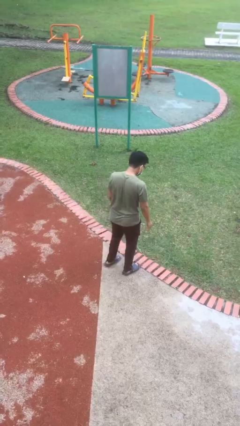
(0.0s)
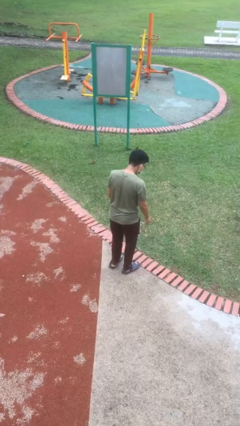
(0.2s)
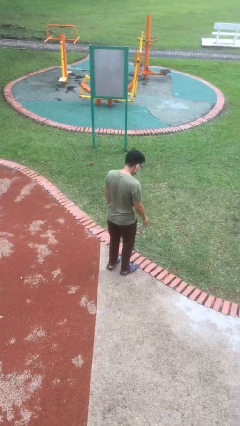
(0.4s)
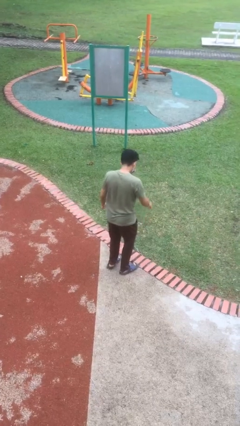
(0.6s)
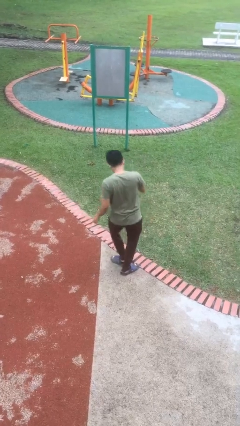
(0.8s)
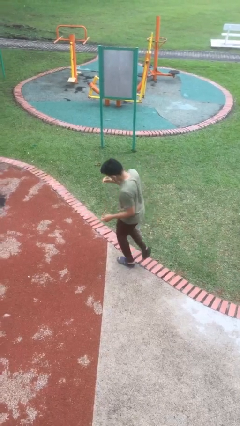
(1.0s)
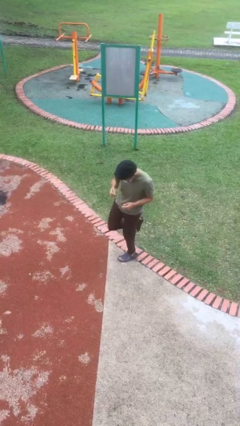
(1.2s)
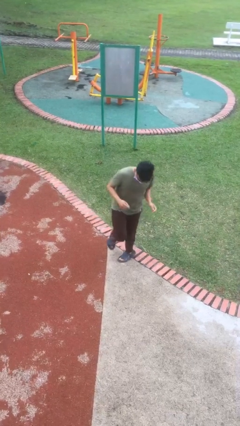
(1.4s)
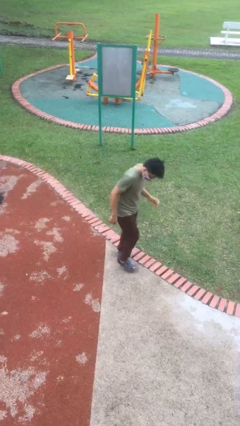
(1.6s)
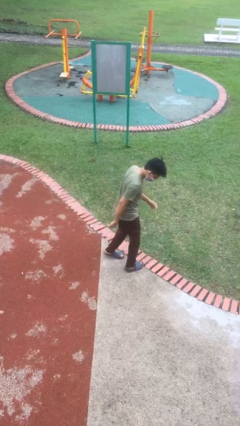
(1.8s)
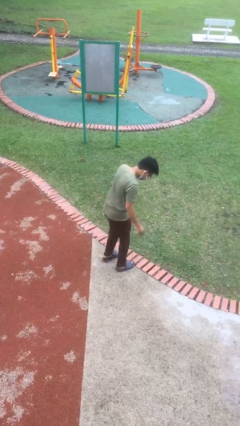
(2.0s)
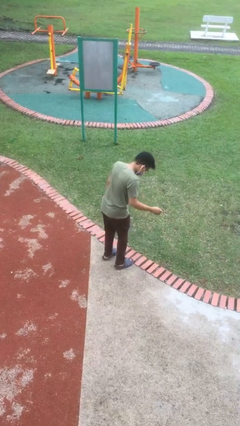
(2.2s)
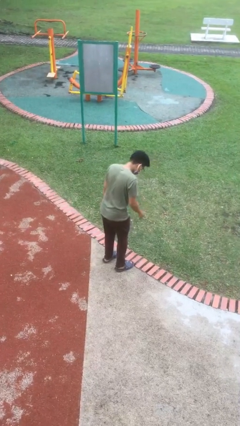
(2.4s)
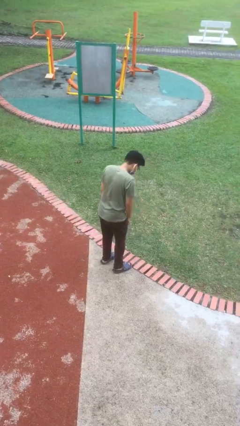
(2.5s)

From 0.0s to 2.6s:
person twirls

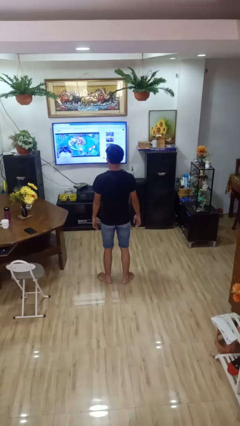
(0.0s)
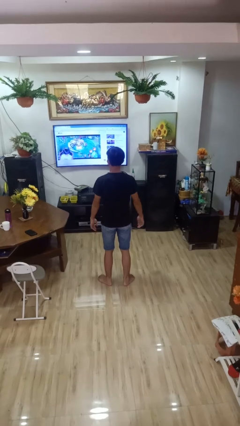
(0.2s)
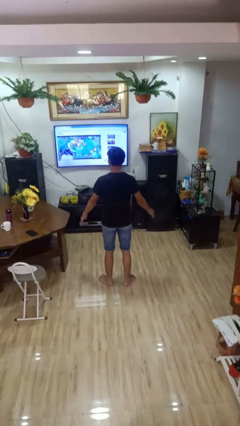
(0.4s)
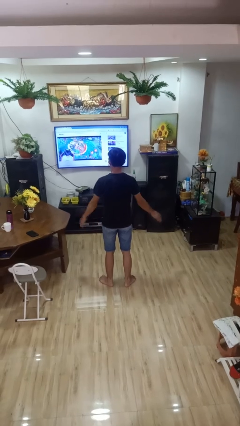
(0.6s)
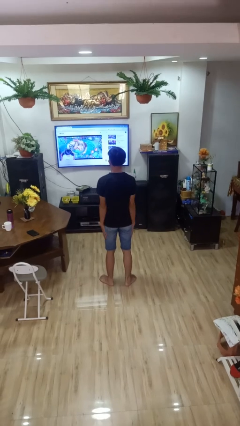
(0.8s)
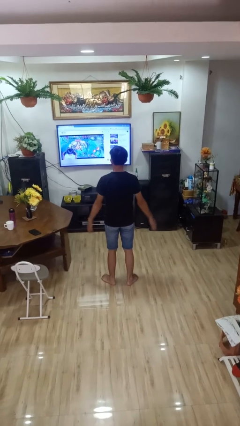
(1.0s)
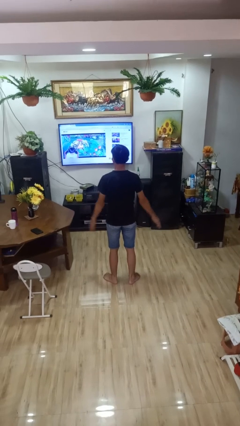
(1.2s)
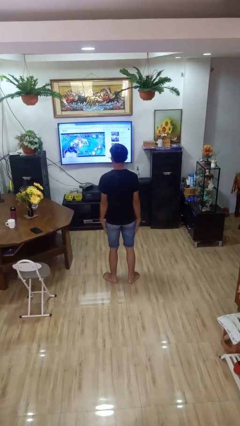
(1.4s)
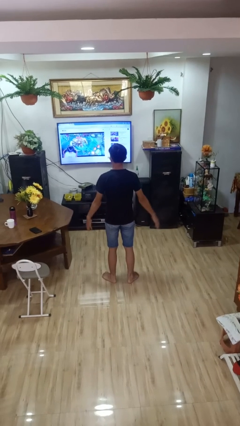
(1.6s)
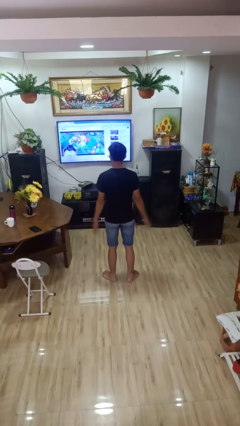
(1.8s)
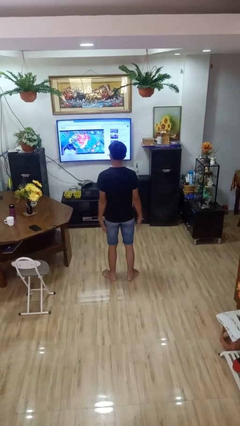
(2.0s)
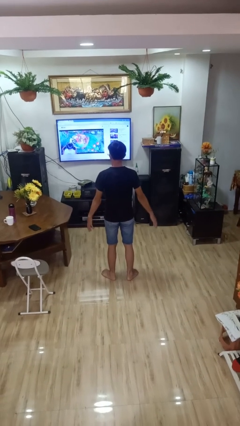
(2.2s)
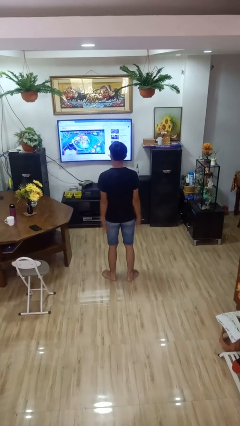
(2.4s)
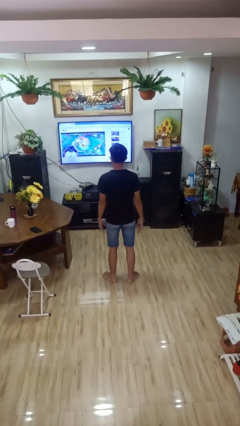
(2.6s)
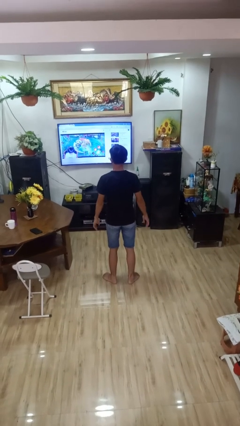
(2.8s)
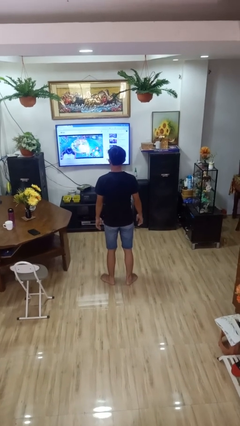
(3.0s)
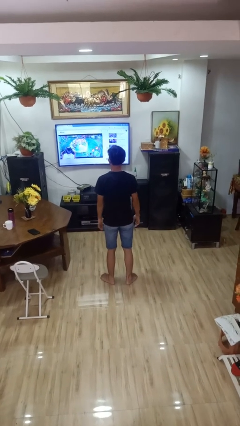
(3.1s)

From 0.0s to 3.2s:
person slaps hands on thighs

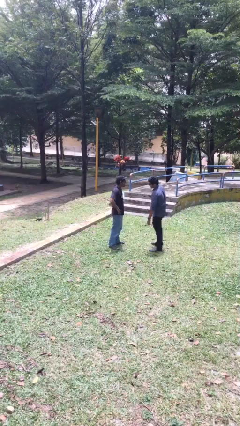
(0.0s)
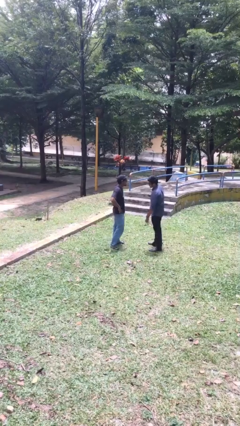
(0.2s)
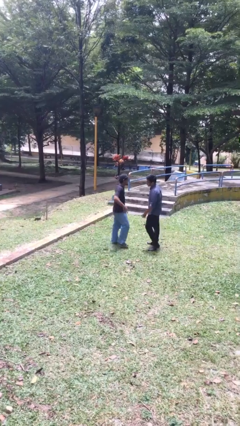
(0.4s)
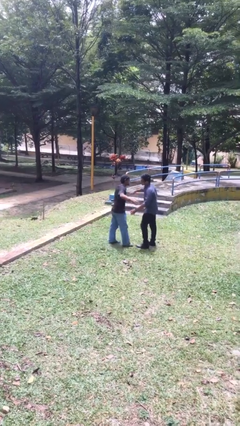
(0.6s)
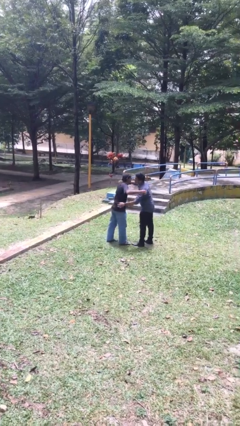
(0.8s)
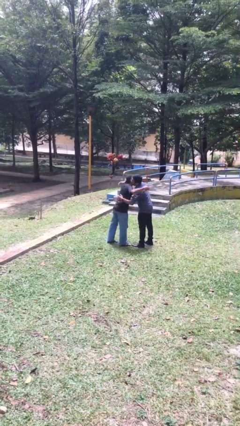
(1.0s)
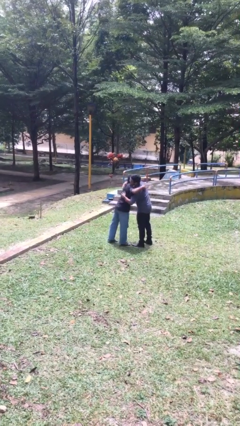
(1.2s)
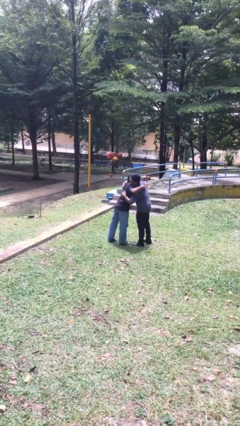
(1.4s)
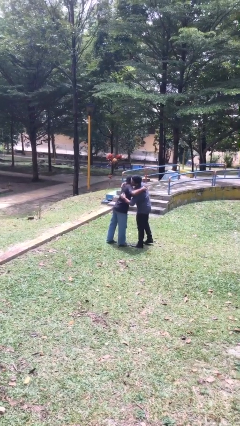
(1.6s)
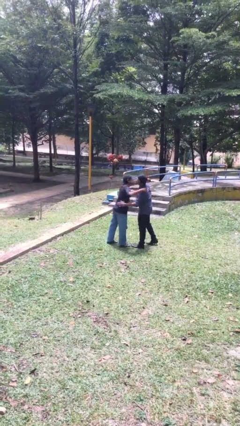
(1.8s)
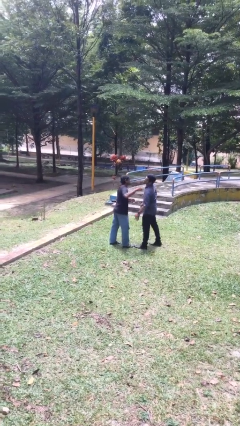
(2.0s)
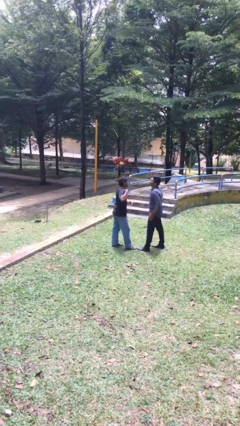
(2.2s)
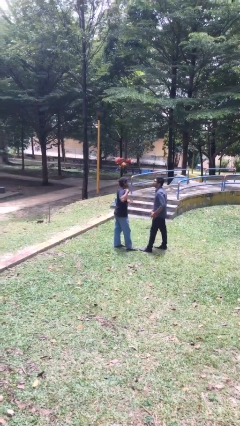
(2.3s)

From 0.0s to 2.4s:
person embraces person

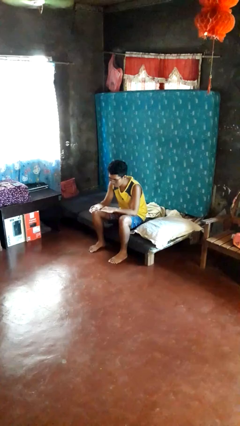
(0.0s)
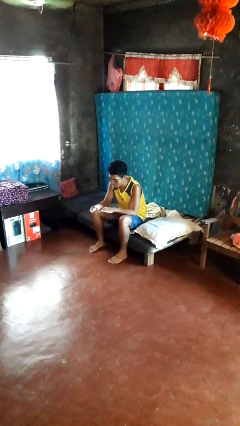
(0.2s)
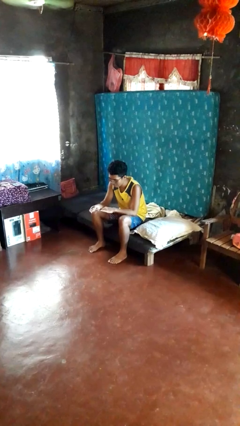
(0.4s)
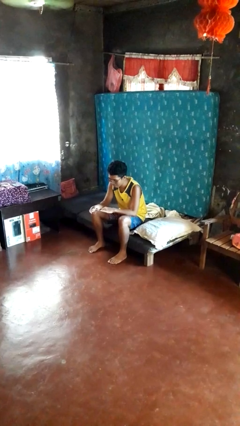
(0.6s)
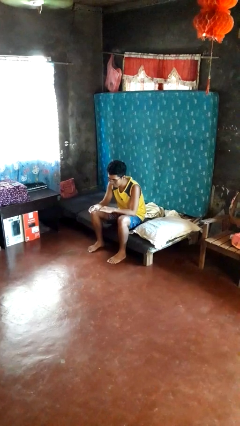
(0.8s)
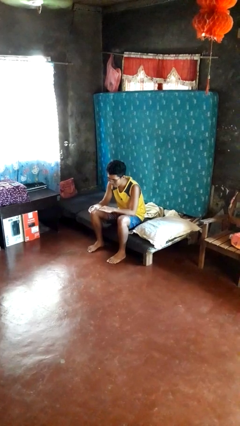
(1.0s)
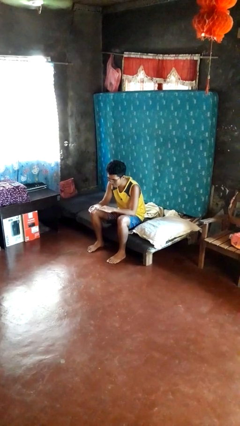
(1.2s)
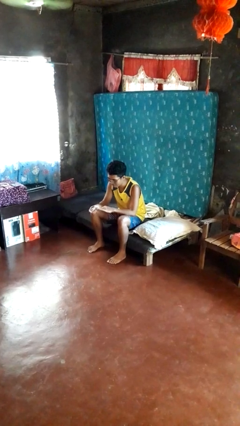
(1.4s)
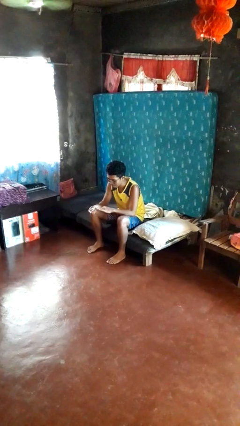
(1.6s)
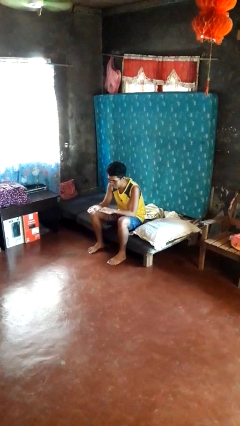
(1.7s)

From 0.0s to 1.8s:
person clips fingernails

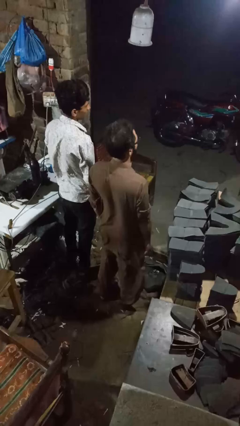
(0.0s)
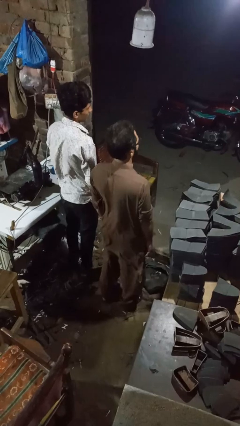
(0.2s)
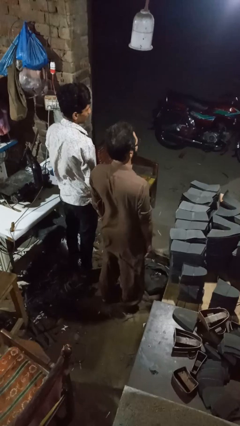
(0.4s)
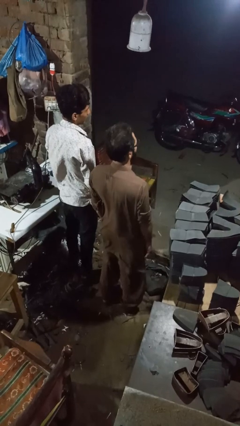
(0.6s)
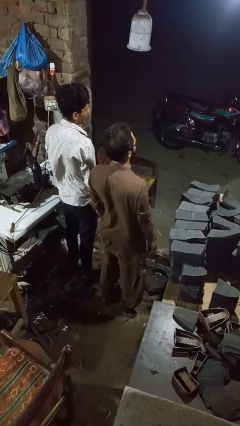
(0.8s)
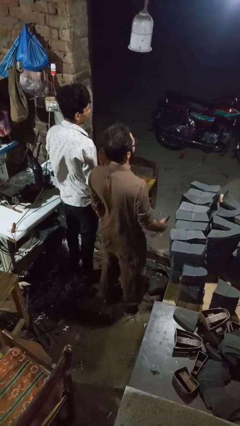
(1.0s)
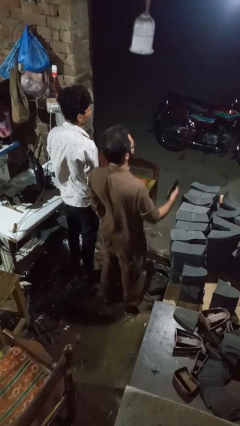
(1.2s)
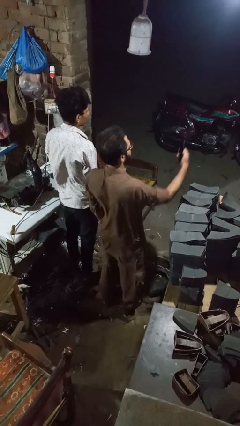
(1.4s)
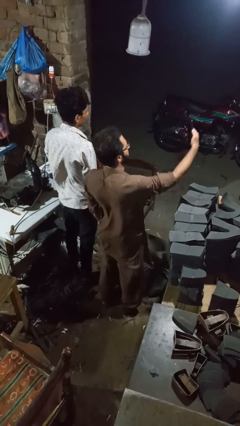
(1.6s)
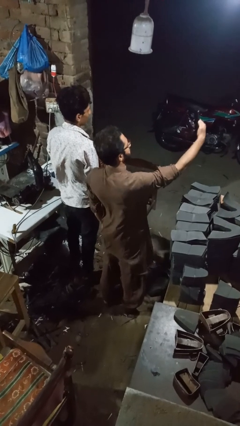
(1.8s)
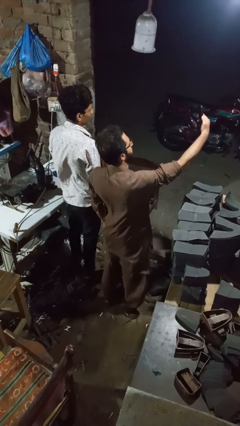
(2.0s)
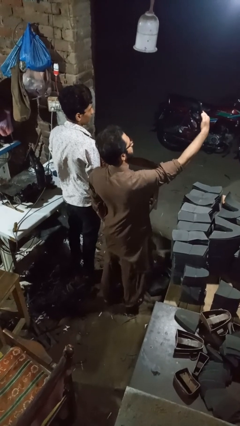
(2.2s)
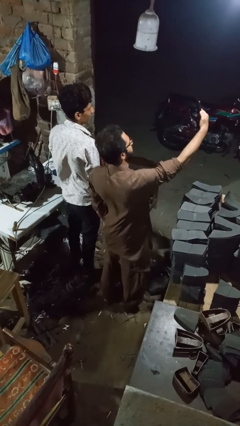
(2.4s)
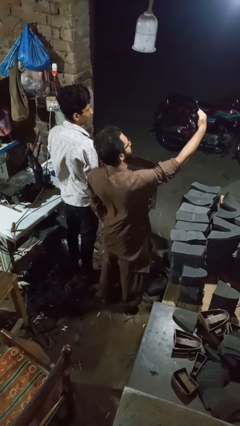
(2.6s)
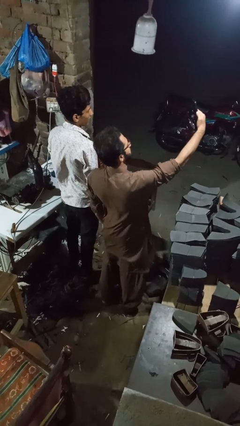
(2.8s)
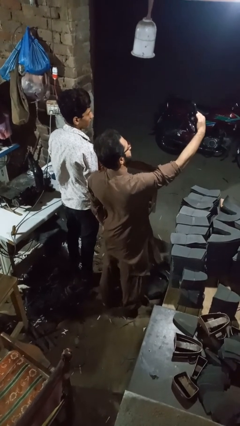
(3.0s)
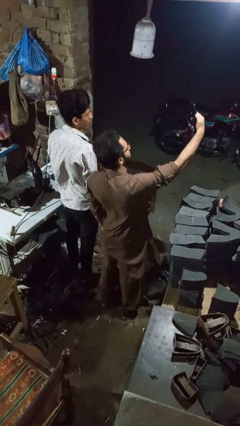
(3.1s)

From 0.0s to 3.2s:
person takes selfie with person

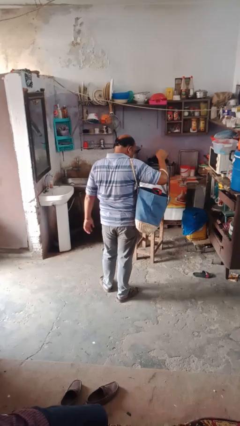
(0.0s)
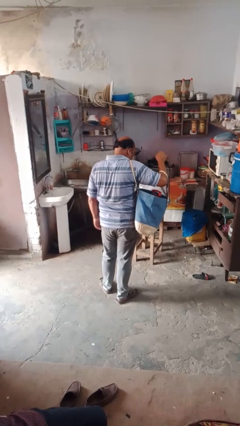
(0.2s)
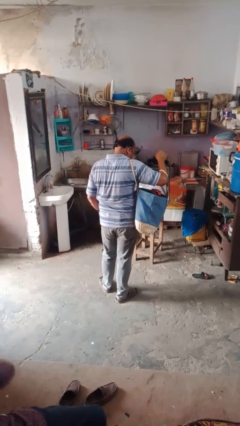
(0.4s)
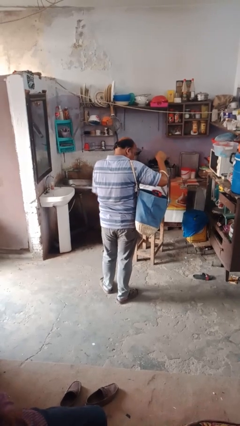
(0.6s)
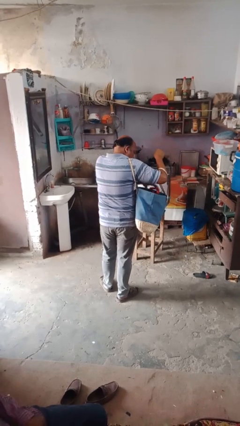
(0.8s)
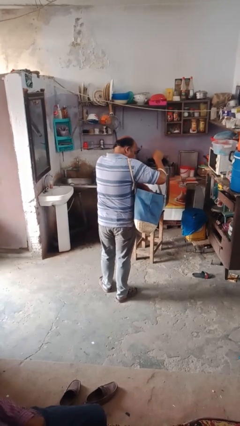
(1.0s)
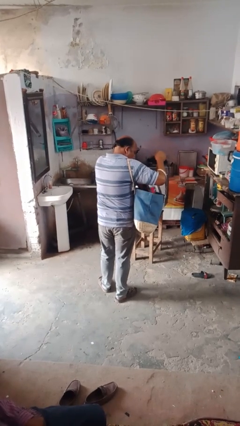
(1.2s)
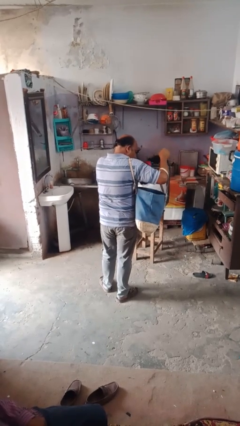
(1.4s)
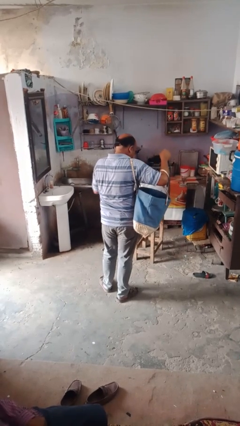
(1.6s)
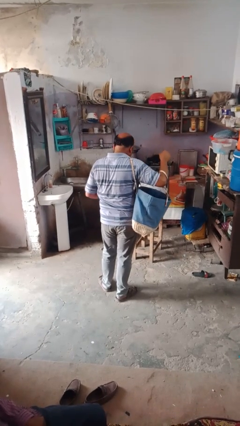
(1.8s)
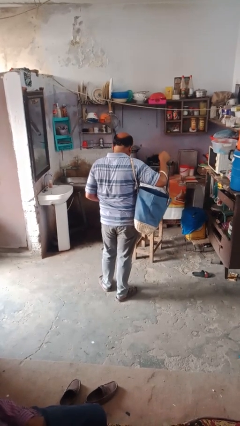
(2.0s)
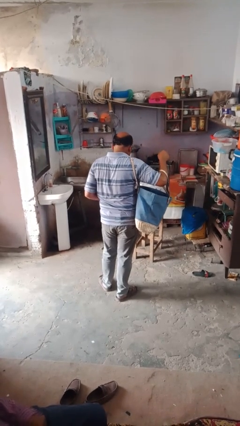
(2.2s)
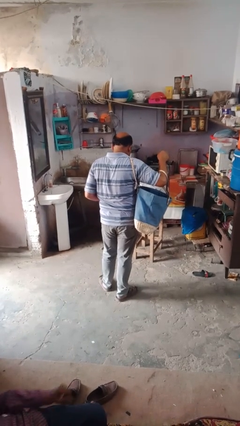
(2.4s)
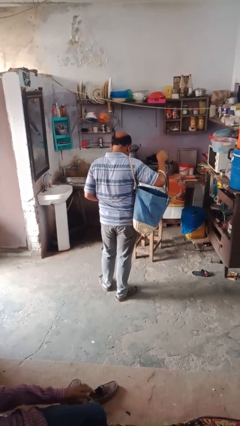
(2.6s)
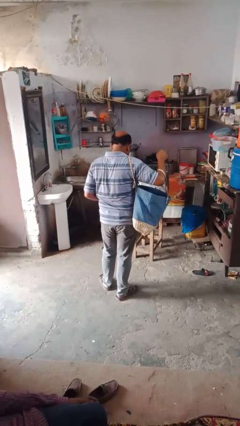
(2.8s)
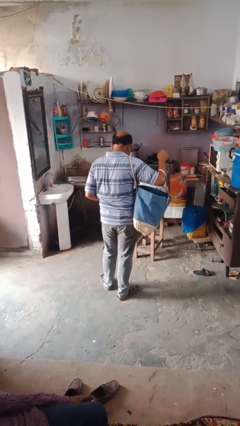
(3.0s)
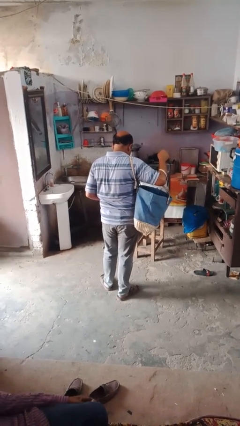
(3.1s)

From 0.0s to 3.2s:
person takes object from bag

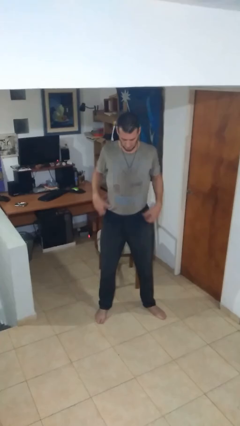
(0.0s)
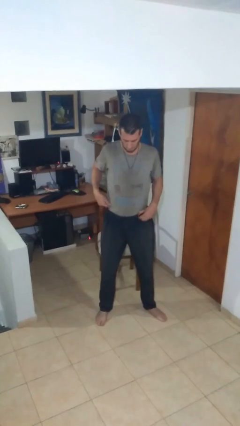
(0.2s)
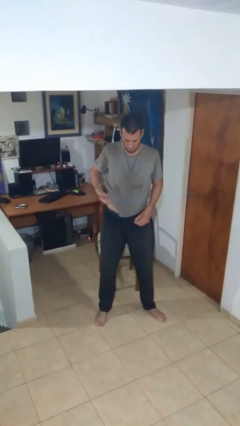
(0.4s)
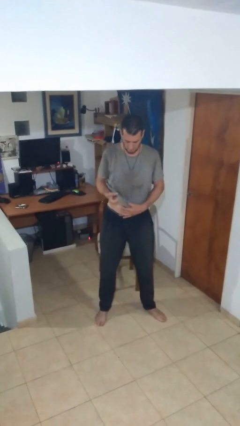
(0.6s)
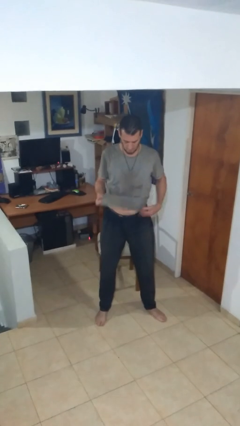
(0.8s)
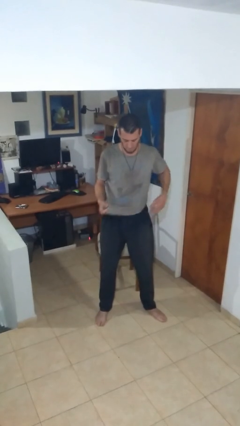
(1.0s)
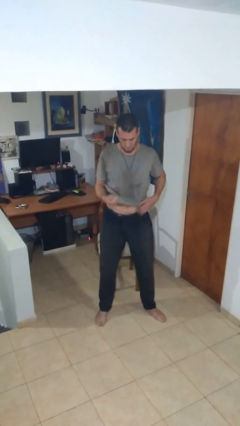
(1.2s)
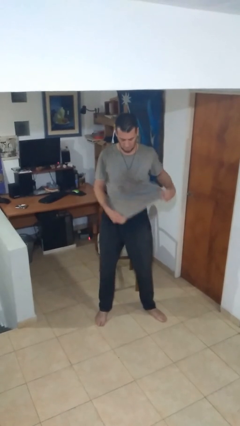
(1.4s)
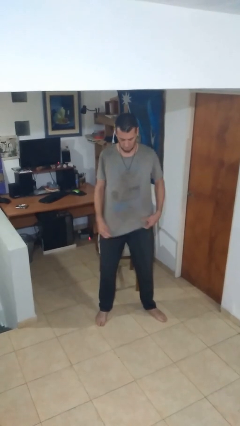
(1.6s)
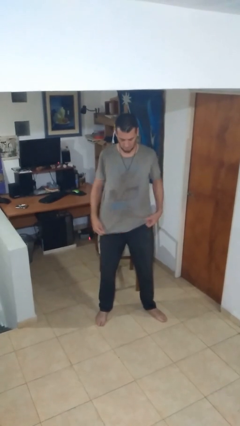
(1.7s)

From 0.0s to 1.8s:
person untucks shirt
